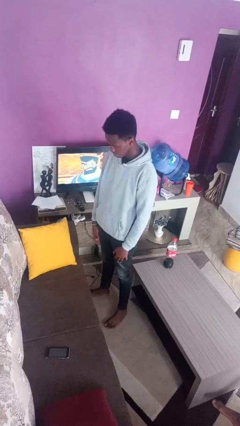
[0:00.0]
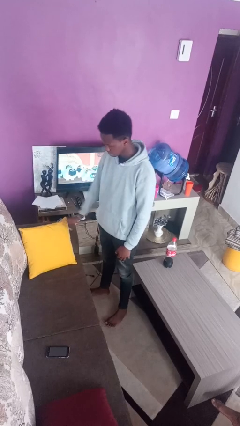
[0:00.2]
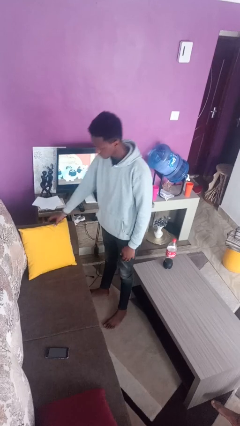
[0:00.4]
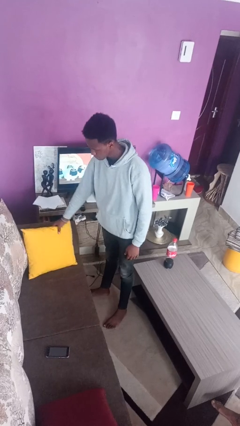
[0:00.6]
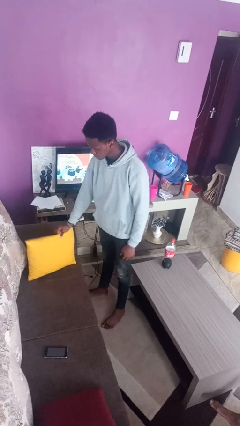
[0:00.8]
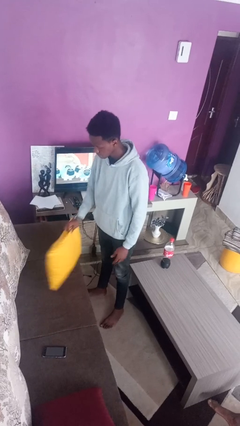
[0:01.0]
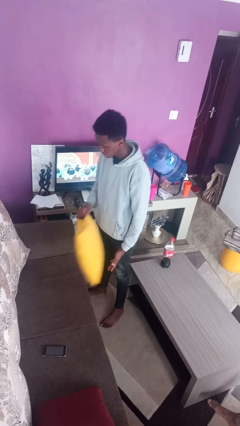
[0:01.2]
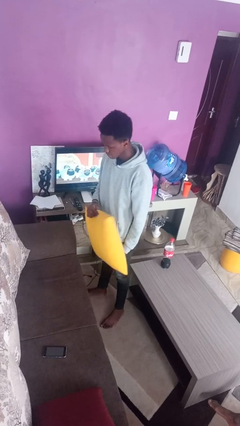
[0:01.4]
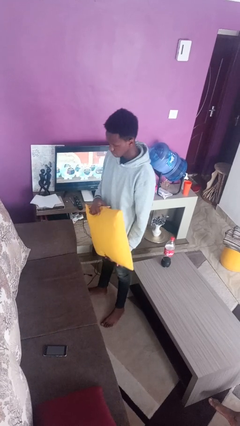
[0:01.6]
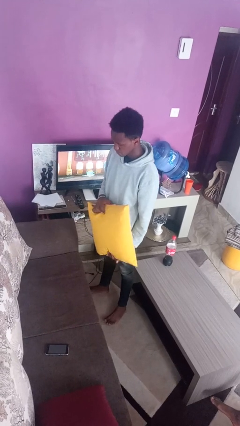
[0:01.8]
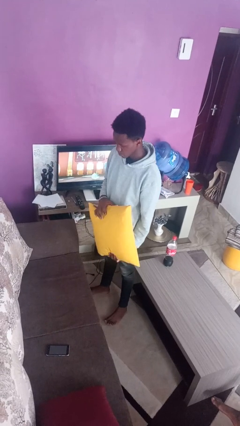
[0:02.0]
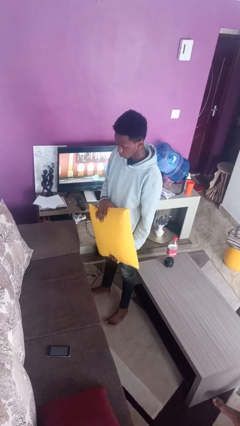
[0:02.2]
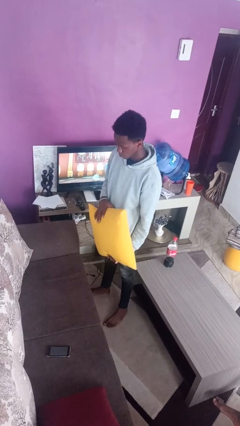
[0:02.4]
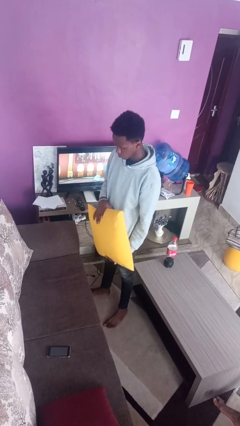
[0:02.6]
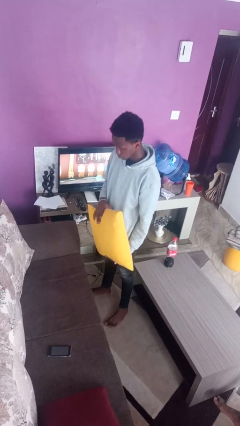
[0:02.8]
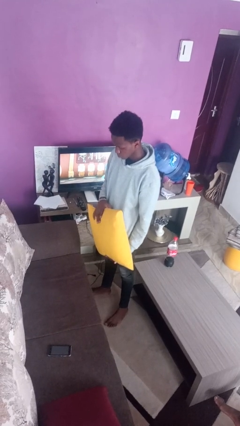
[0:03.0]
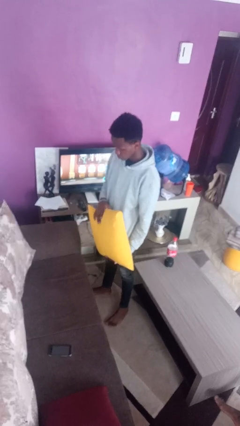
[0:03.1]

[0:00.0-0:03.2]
person picks up object from couch

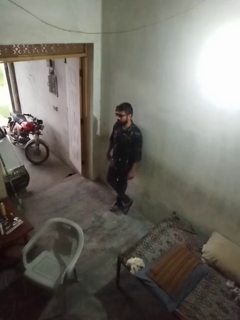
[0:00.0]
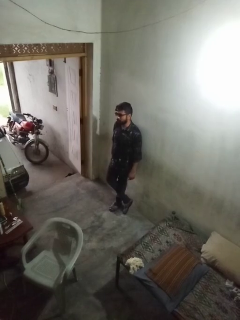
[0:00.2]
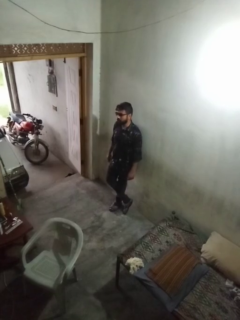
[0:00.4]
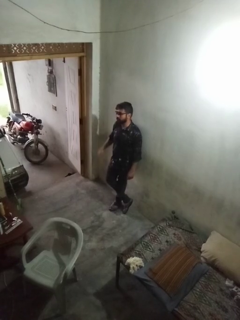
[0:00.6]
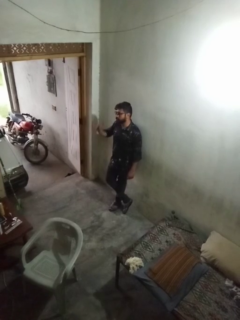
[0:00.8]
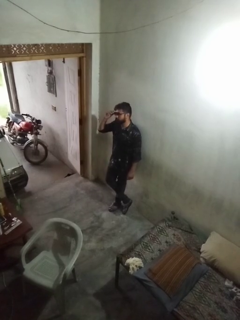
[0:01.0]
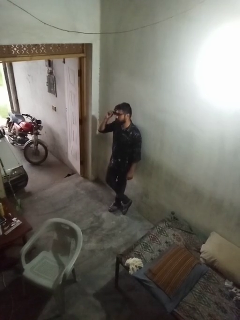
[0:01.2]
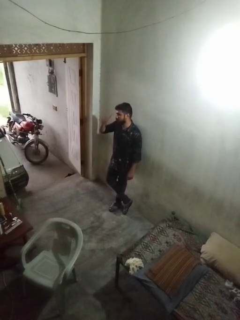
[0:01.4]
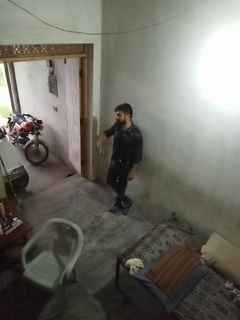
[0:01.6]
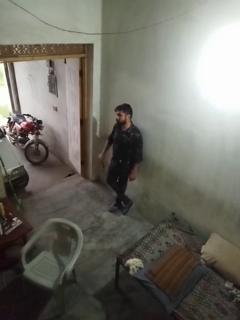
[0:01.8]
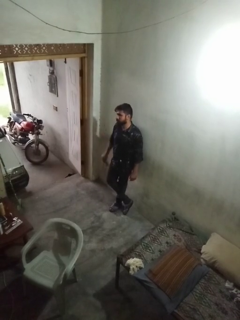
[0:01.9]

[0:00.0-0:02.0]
person takes off sunglasses

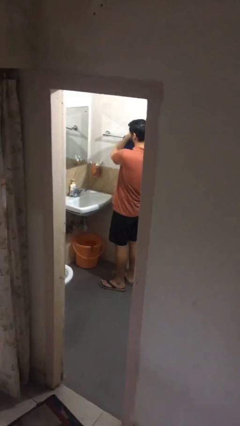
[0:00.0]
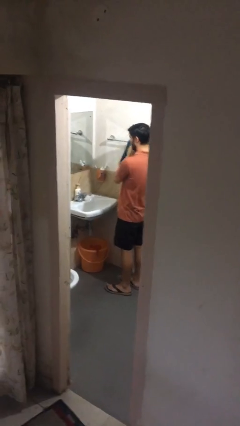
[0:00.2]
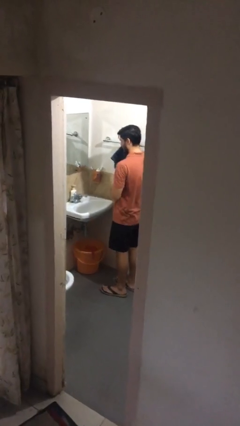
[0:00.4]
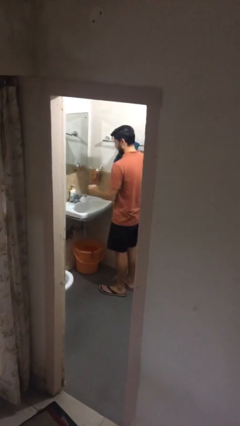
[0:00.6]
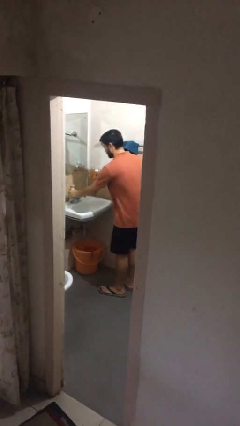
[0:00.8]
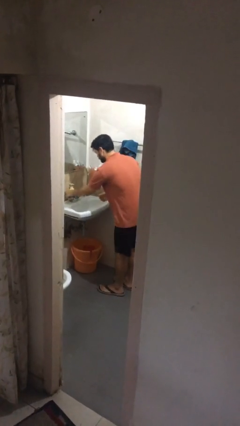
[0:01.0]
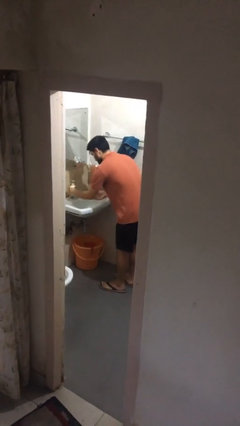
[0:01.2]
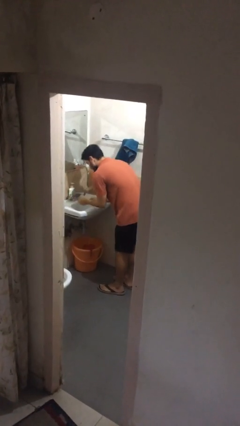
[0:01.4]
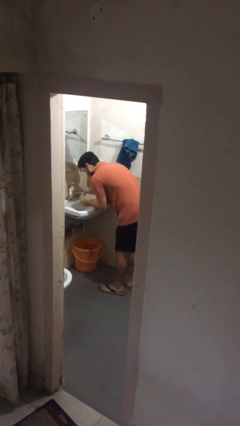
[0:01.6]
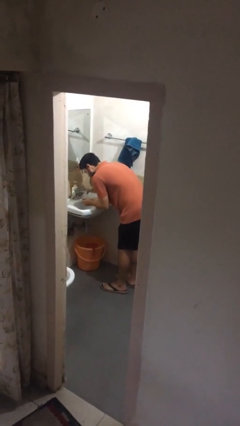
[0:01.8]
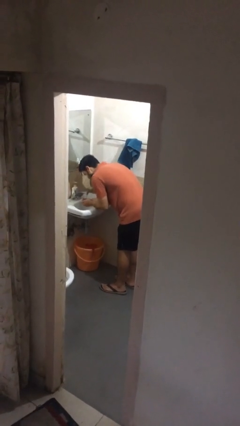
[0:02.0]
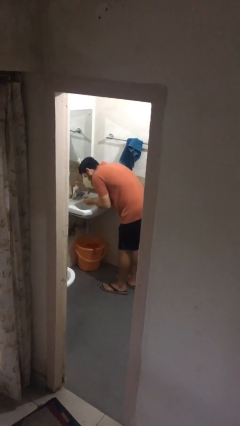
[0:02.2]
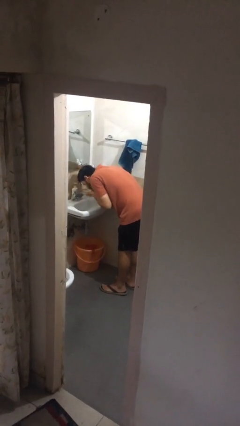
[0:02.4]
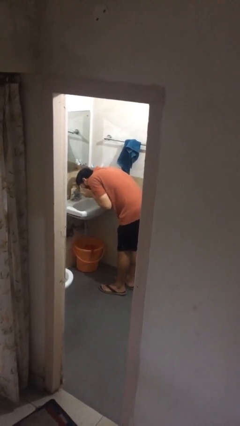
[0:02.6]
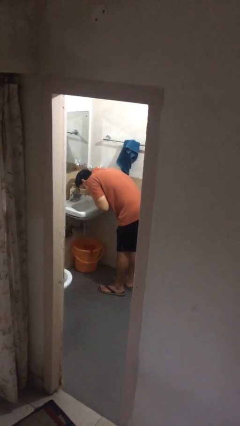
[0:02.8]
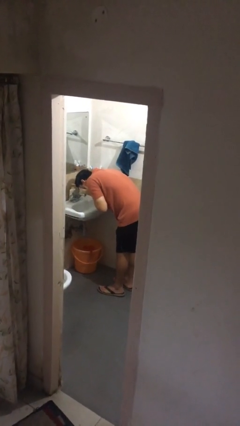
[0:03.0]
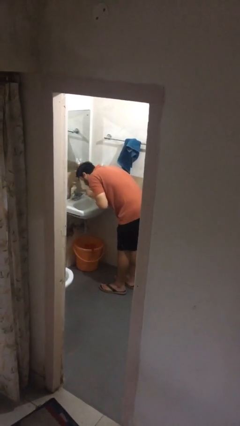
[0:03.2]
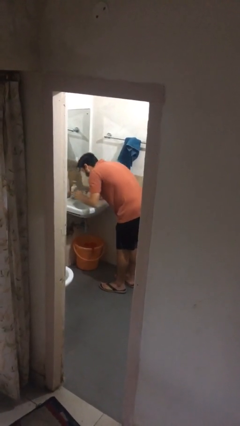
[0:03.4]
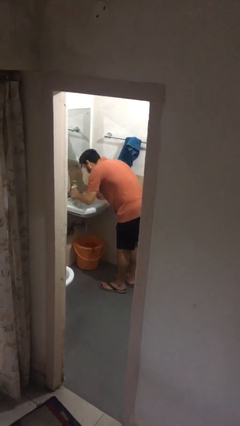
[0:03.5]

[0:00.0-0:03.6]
person washes face

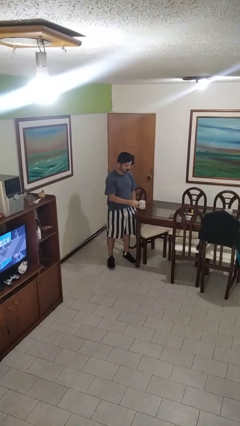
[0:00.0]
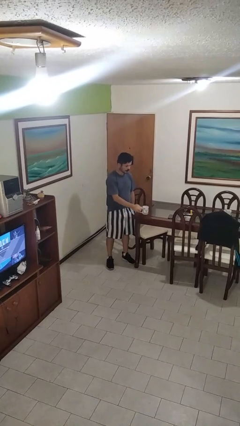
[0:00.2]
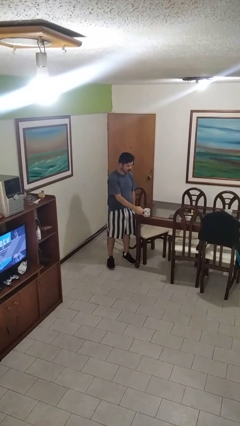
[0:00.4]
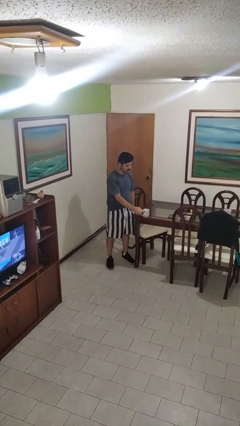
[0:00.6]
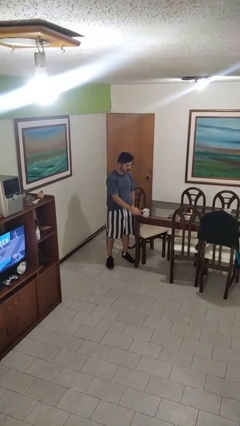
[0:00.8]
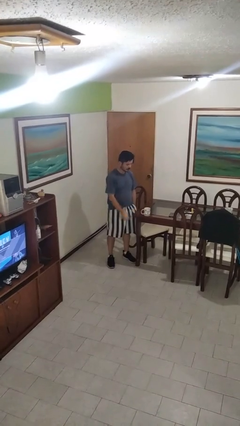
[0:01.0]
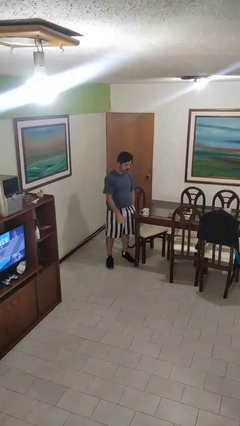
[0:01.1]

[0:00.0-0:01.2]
person puts down object on table

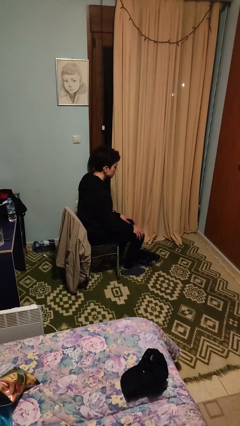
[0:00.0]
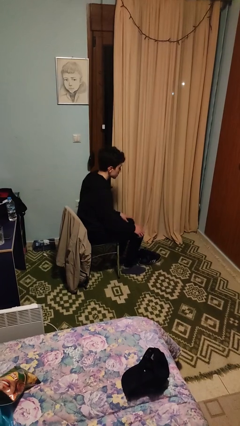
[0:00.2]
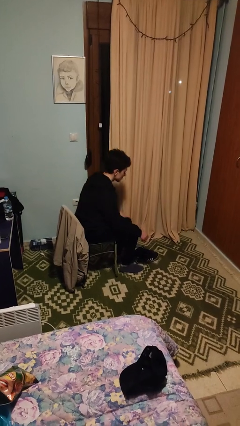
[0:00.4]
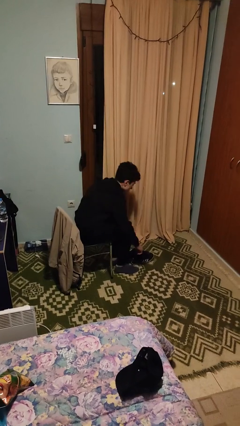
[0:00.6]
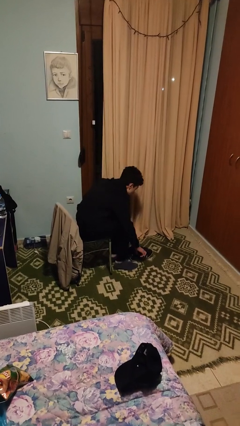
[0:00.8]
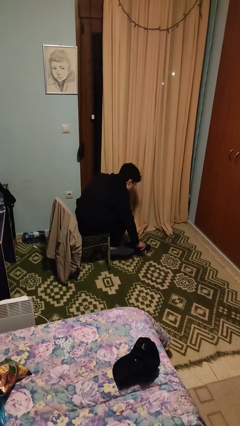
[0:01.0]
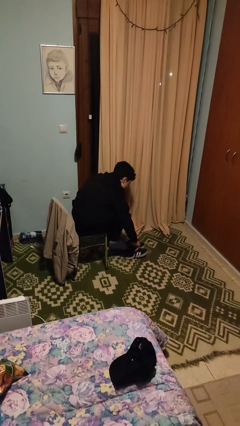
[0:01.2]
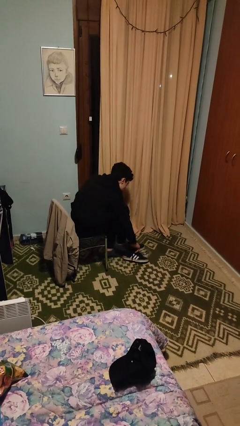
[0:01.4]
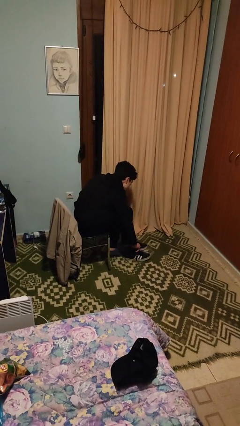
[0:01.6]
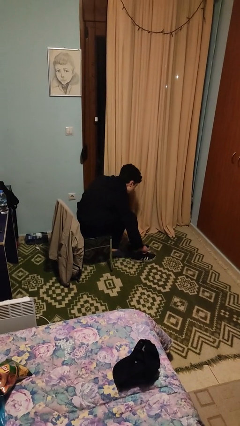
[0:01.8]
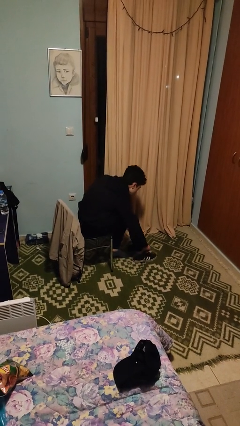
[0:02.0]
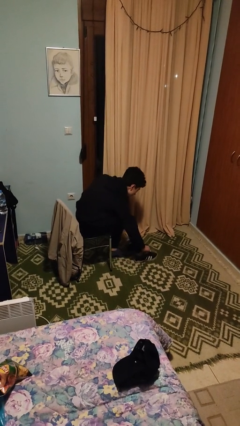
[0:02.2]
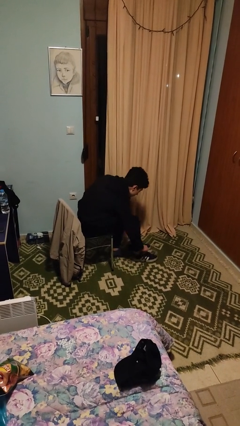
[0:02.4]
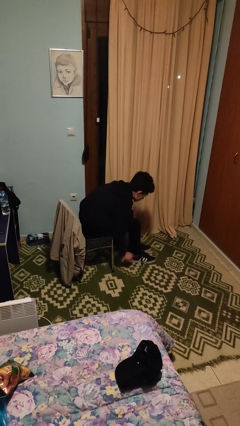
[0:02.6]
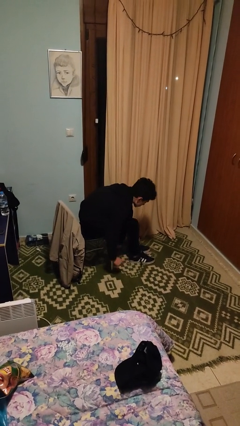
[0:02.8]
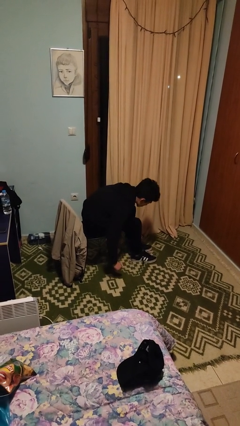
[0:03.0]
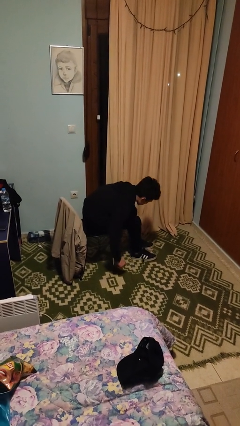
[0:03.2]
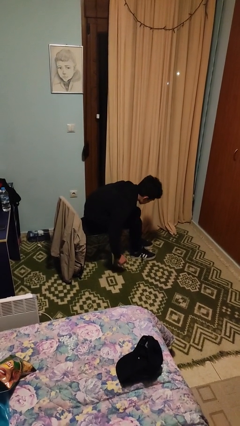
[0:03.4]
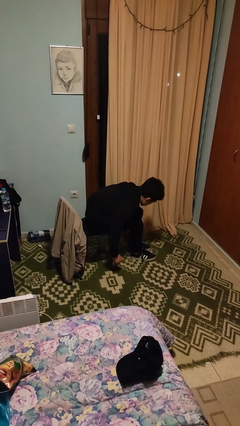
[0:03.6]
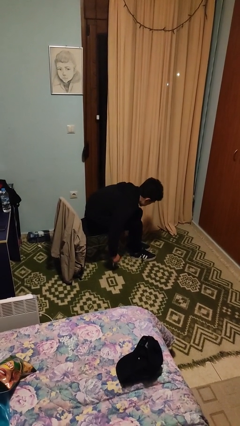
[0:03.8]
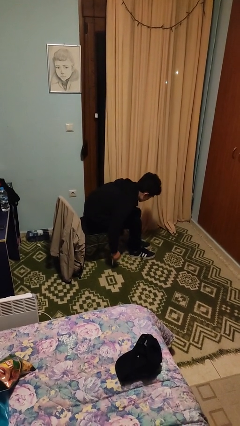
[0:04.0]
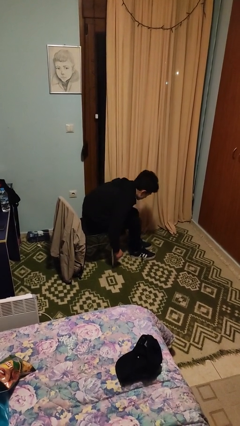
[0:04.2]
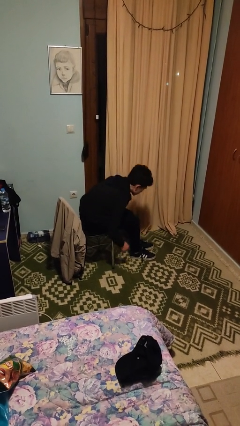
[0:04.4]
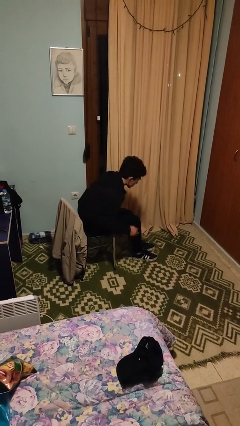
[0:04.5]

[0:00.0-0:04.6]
person puts on shoes

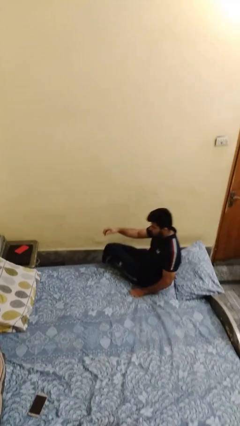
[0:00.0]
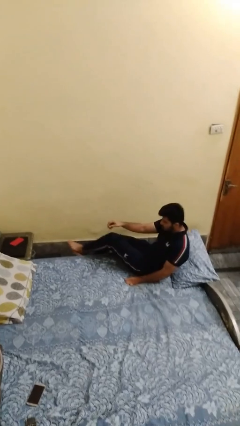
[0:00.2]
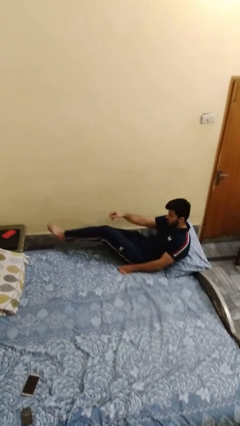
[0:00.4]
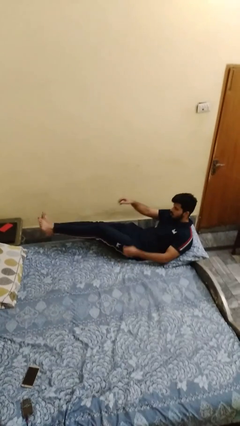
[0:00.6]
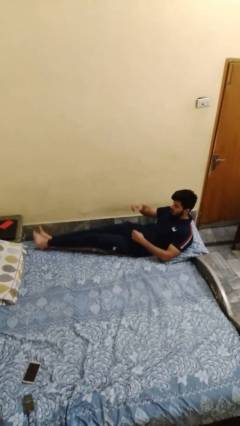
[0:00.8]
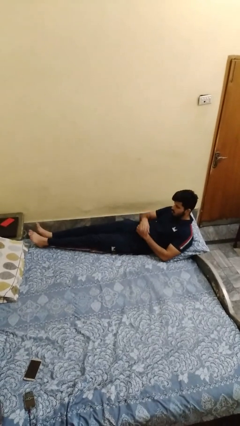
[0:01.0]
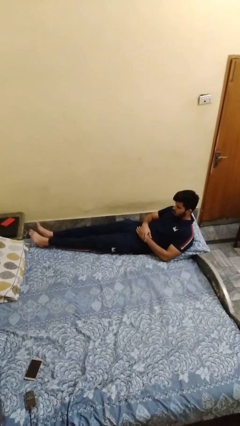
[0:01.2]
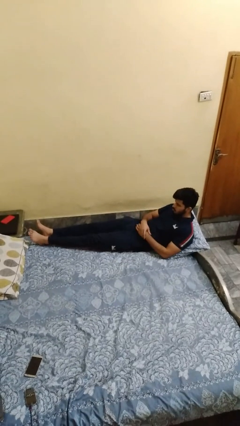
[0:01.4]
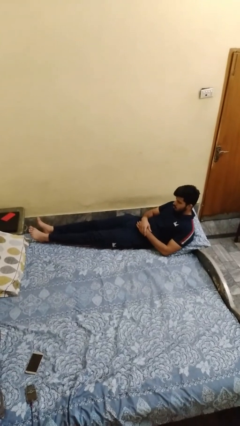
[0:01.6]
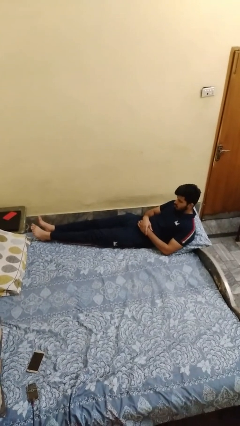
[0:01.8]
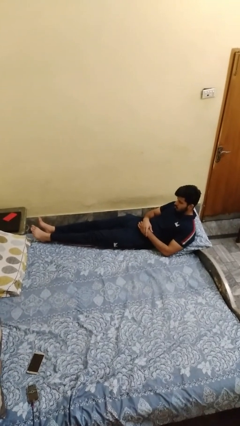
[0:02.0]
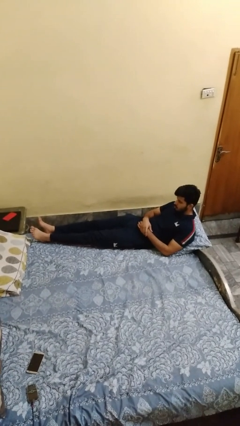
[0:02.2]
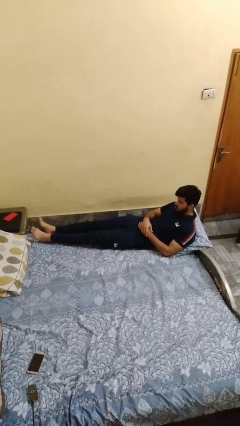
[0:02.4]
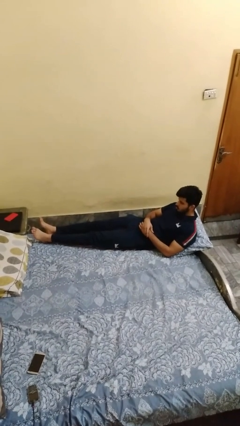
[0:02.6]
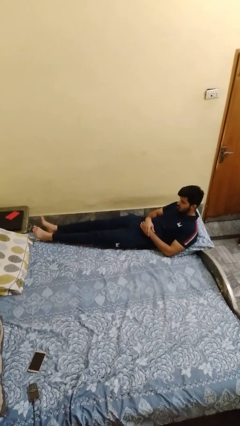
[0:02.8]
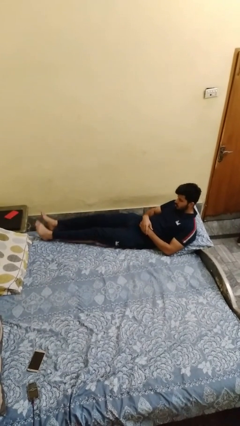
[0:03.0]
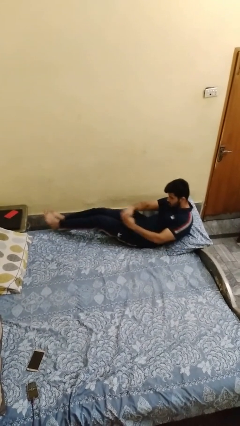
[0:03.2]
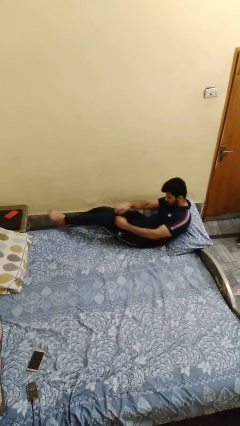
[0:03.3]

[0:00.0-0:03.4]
person lies down on bed
